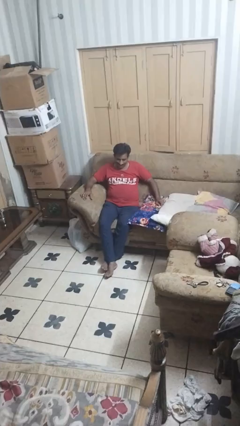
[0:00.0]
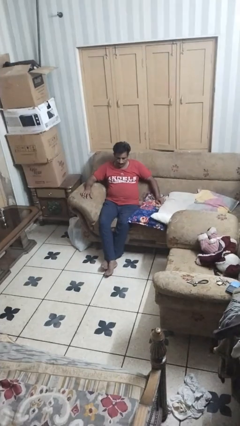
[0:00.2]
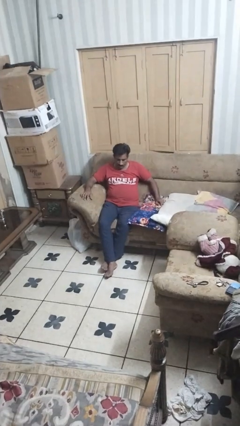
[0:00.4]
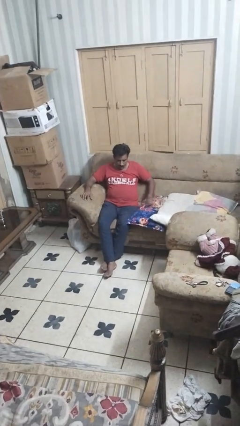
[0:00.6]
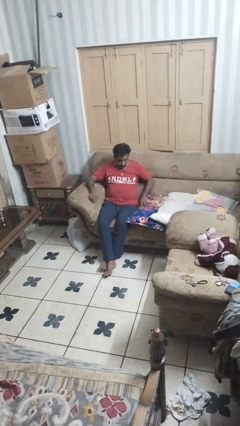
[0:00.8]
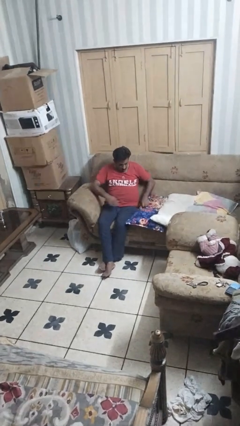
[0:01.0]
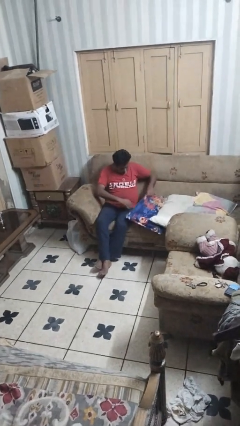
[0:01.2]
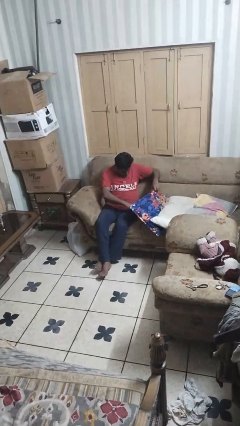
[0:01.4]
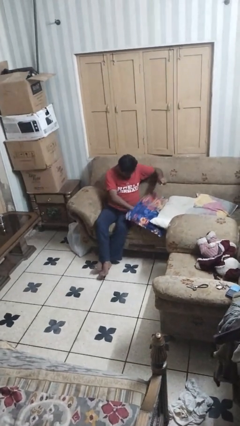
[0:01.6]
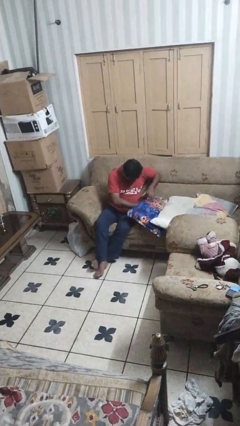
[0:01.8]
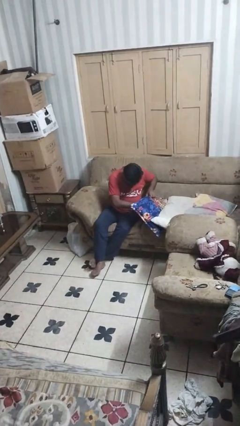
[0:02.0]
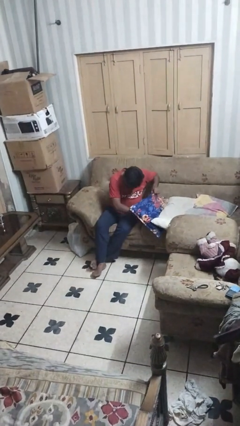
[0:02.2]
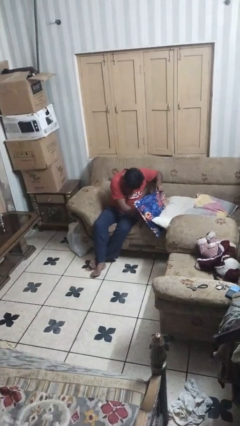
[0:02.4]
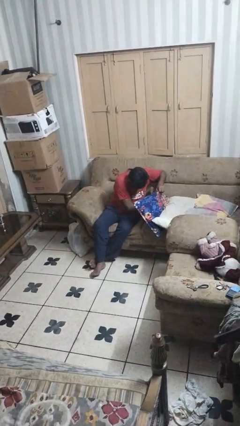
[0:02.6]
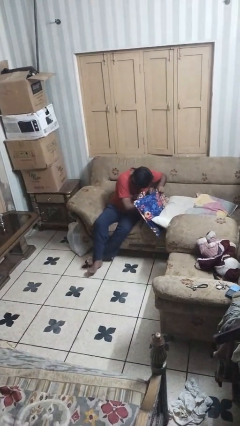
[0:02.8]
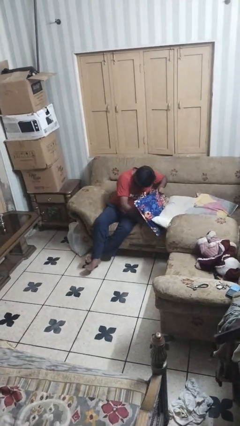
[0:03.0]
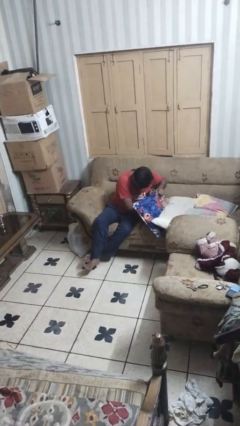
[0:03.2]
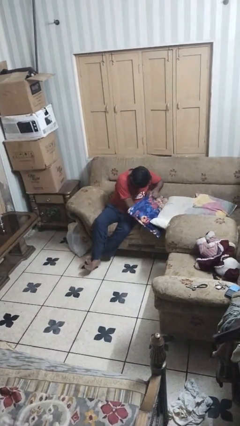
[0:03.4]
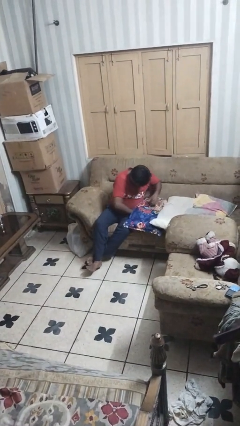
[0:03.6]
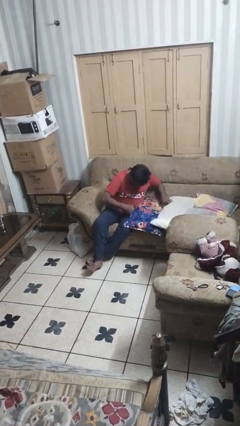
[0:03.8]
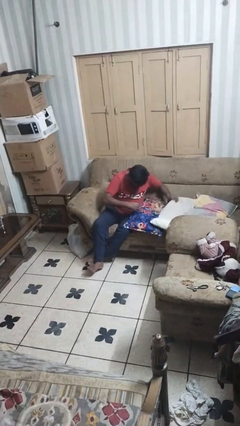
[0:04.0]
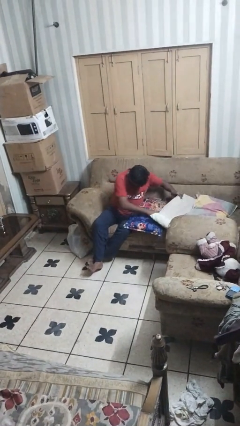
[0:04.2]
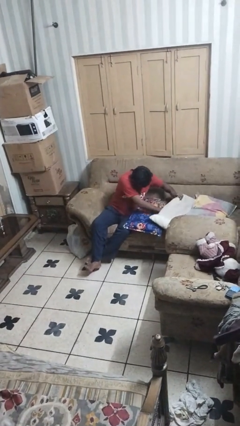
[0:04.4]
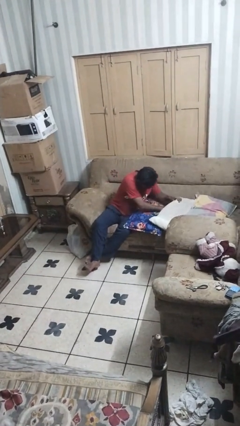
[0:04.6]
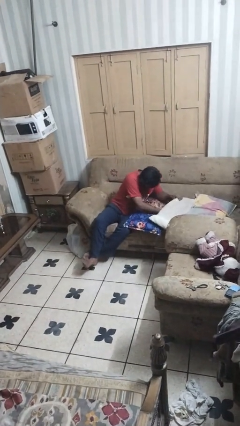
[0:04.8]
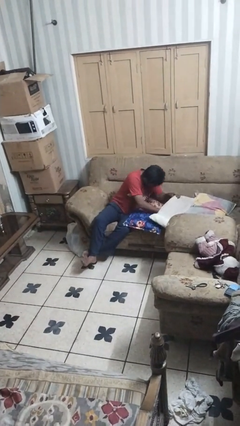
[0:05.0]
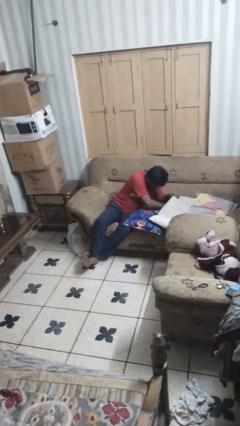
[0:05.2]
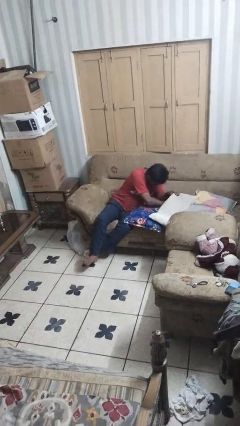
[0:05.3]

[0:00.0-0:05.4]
person searches in couch

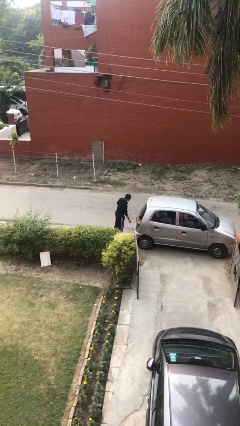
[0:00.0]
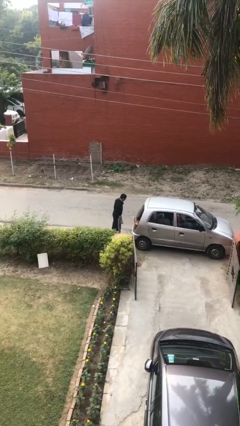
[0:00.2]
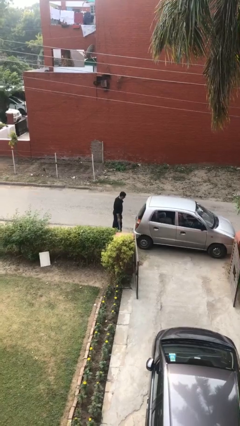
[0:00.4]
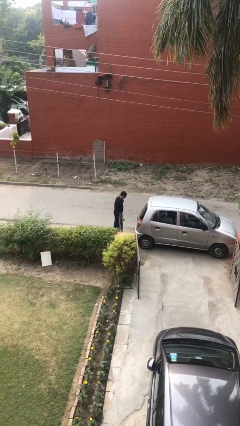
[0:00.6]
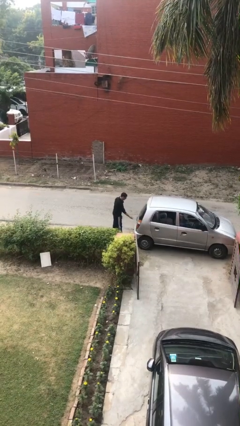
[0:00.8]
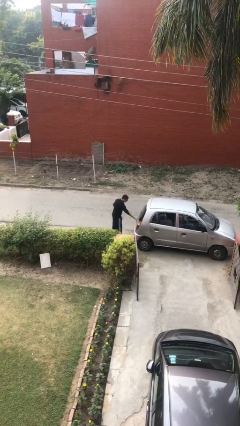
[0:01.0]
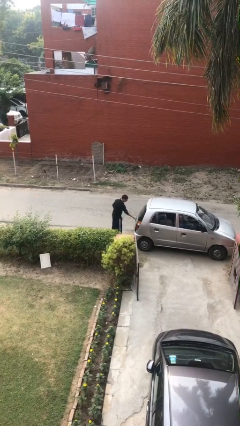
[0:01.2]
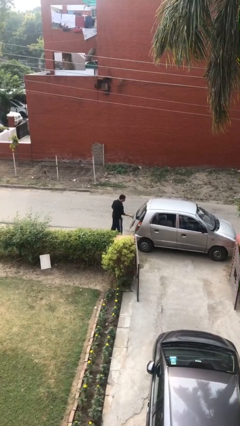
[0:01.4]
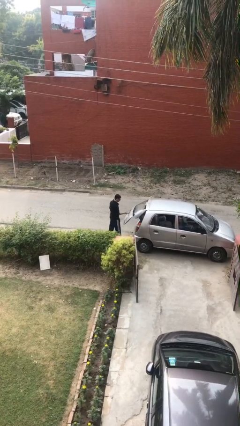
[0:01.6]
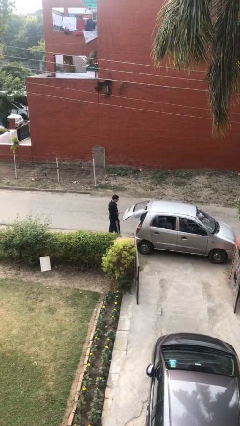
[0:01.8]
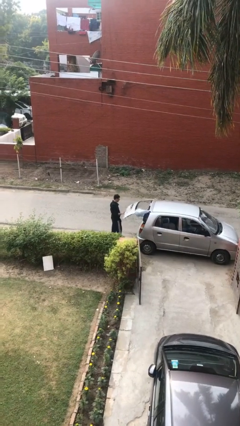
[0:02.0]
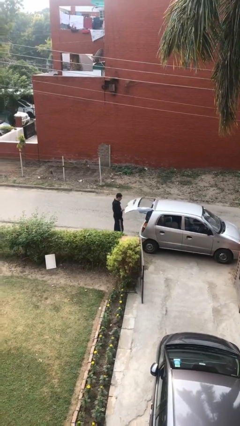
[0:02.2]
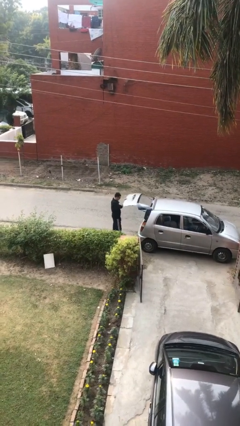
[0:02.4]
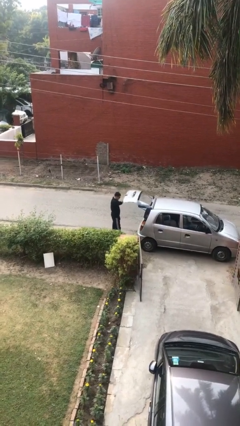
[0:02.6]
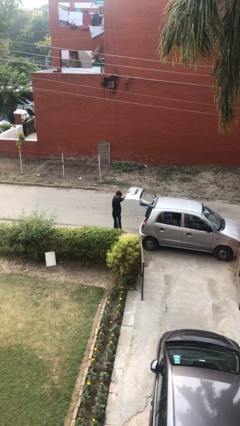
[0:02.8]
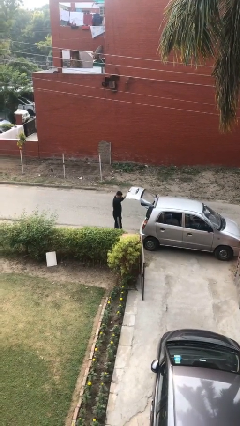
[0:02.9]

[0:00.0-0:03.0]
person opens car trunk

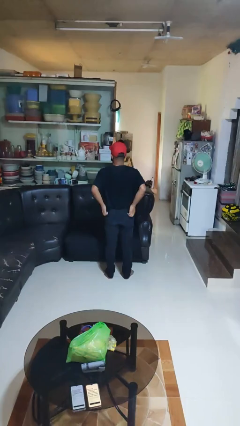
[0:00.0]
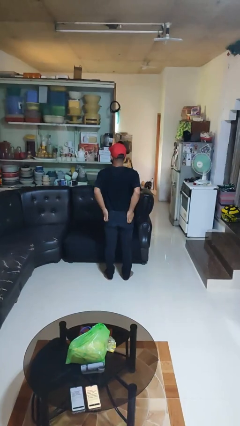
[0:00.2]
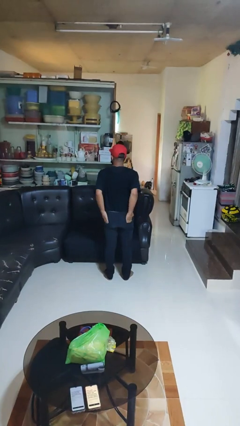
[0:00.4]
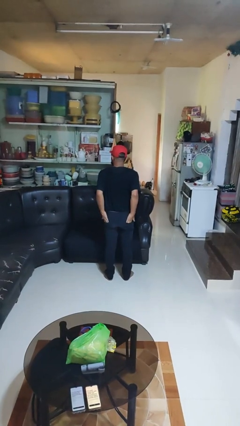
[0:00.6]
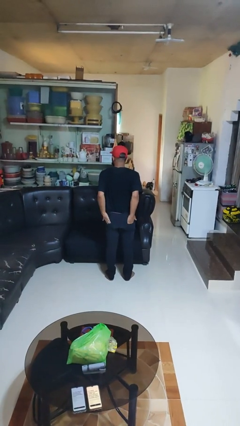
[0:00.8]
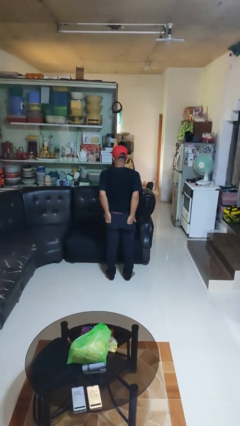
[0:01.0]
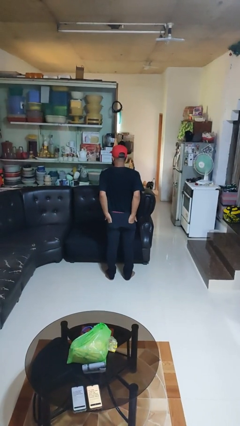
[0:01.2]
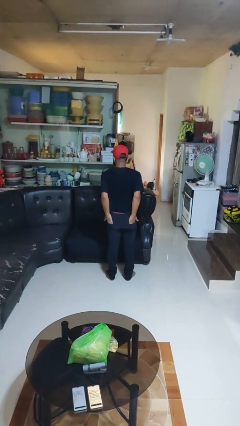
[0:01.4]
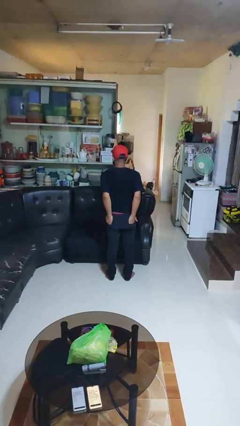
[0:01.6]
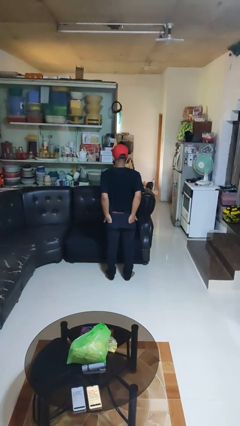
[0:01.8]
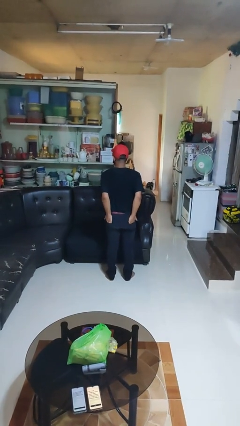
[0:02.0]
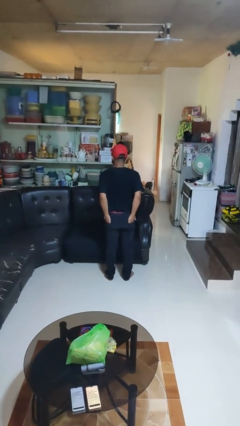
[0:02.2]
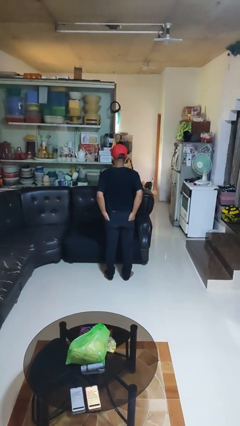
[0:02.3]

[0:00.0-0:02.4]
person puts hands in back pockets

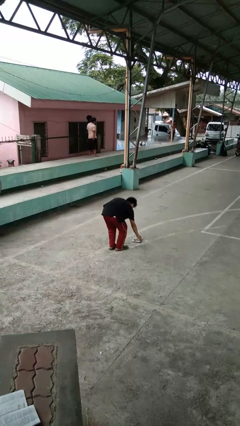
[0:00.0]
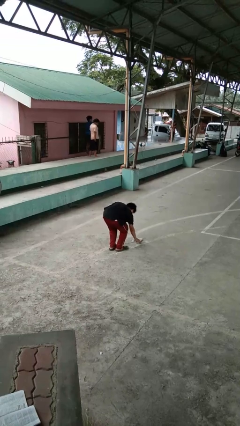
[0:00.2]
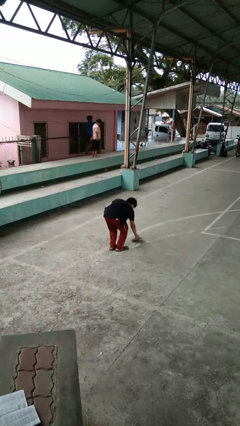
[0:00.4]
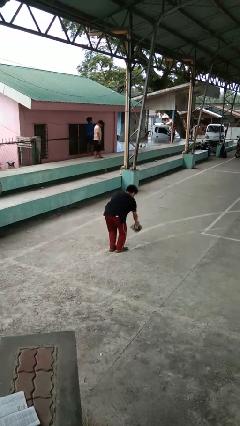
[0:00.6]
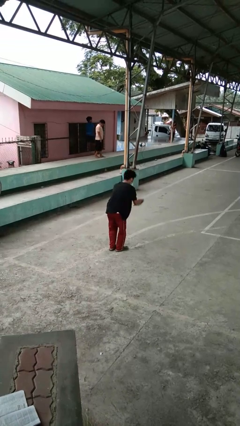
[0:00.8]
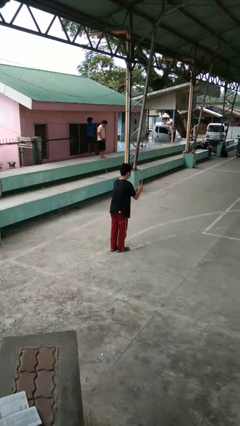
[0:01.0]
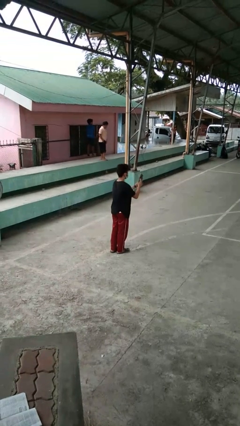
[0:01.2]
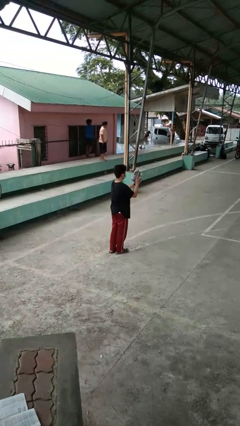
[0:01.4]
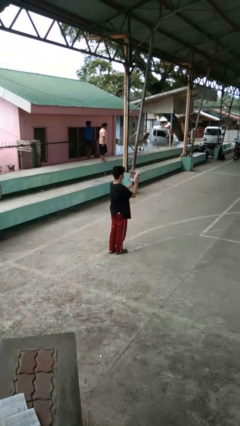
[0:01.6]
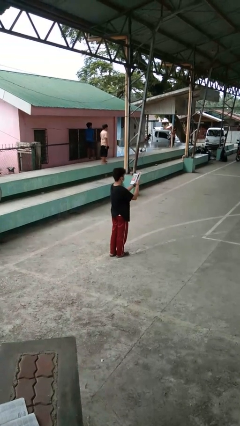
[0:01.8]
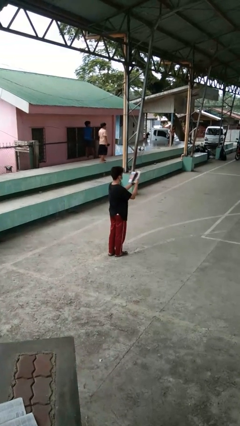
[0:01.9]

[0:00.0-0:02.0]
person picks up object from floor

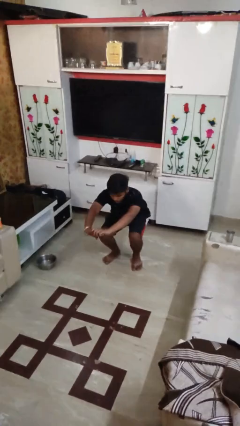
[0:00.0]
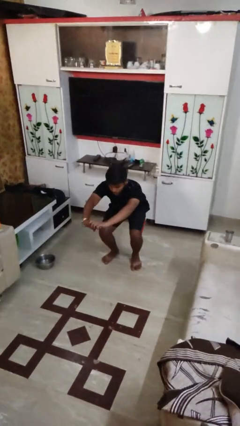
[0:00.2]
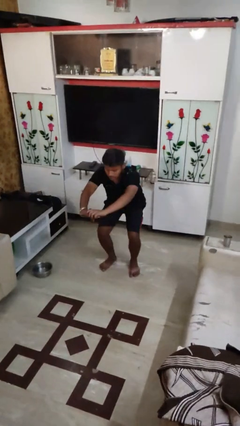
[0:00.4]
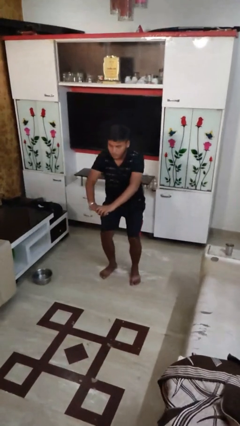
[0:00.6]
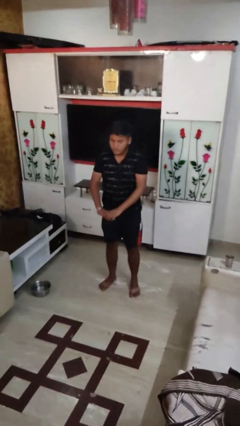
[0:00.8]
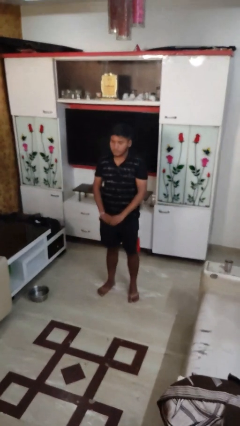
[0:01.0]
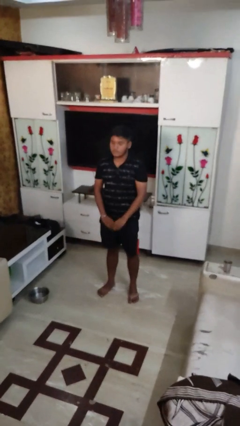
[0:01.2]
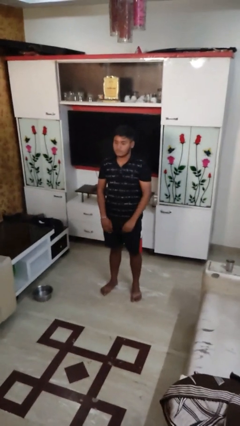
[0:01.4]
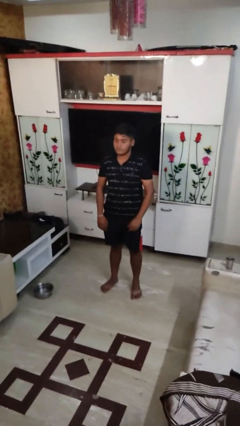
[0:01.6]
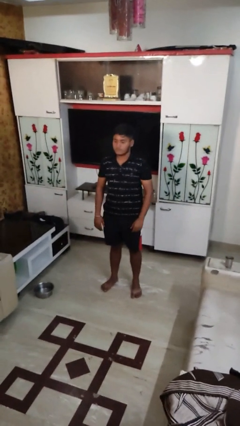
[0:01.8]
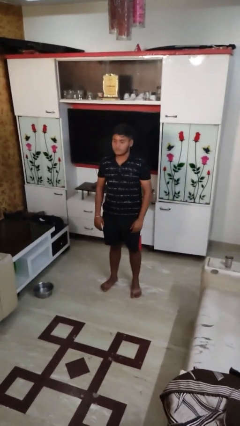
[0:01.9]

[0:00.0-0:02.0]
person stands up

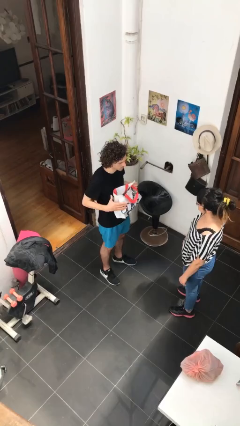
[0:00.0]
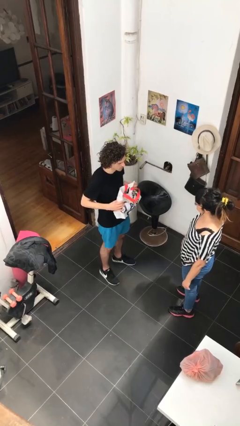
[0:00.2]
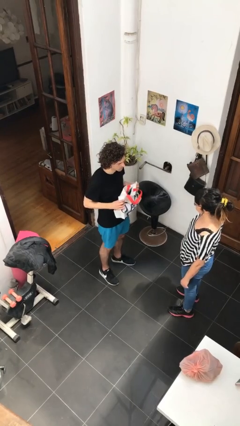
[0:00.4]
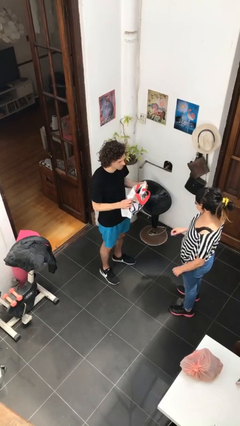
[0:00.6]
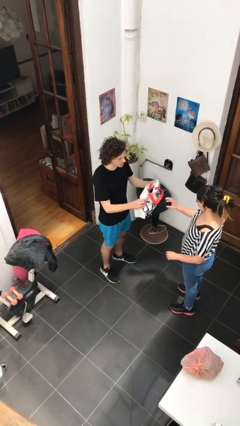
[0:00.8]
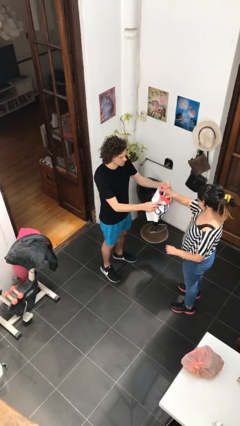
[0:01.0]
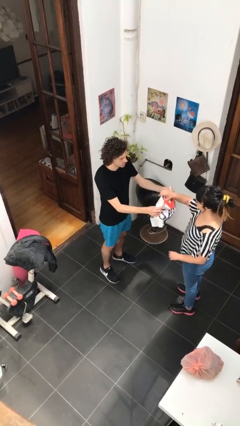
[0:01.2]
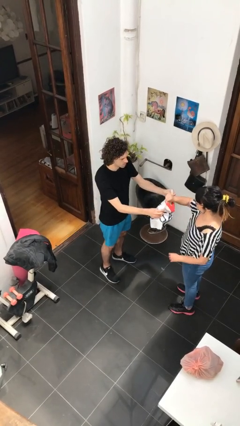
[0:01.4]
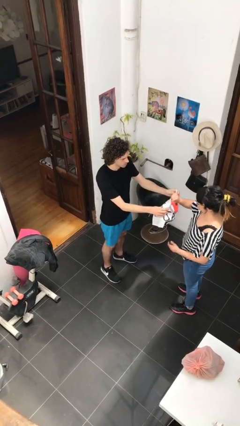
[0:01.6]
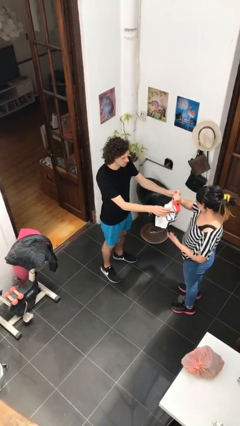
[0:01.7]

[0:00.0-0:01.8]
person transfers object to person

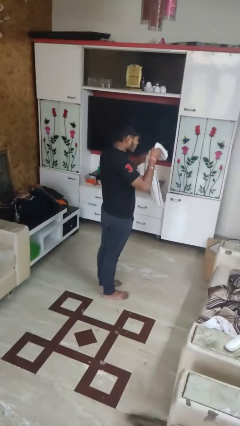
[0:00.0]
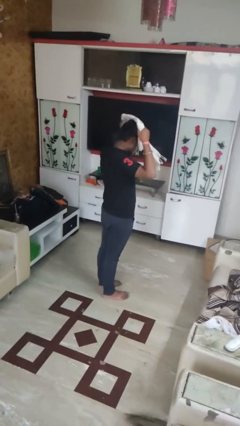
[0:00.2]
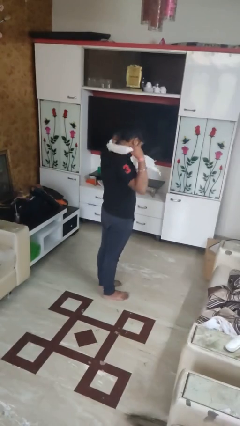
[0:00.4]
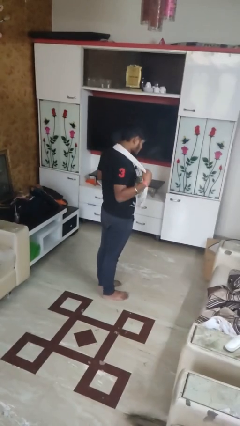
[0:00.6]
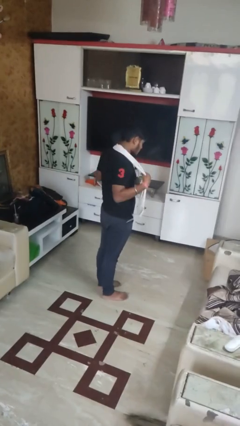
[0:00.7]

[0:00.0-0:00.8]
person puts on scarf
